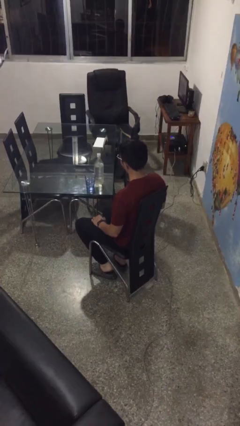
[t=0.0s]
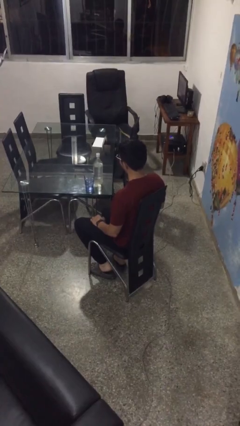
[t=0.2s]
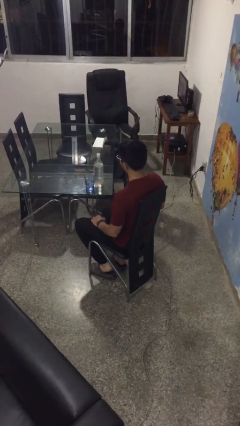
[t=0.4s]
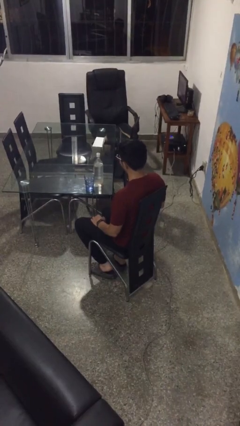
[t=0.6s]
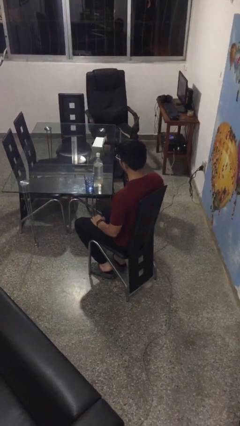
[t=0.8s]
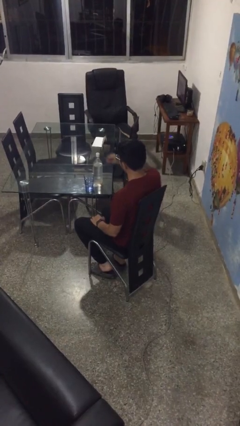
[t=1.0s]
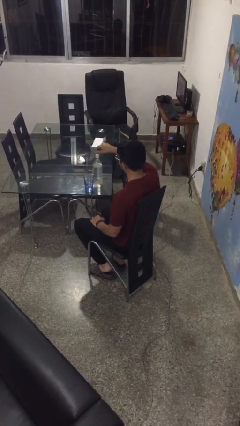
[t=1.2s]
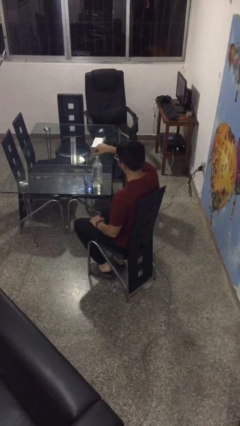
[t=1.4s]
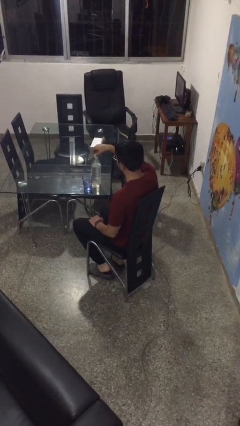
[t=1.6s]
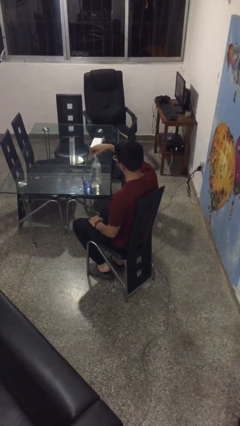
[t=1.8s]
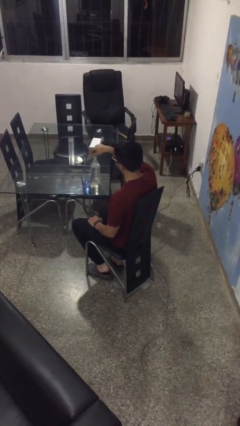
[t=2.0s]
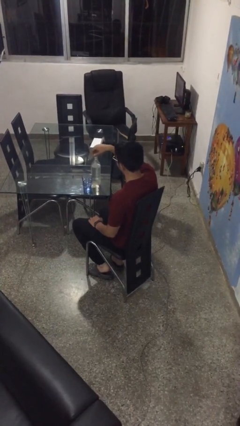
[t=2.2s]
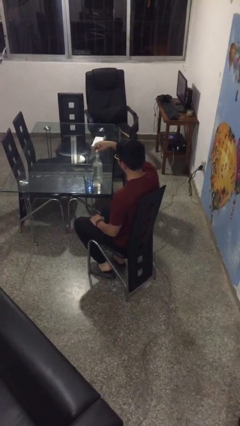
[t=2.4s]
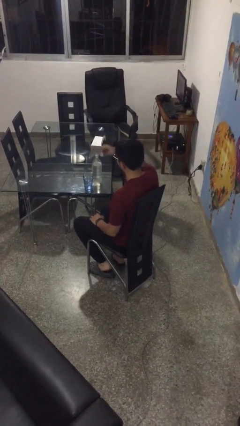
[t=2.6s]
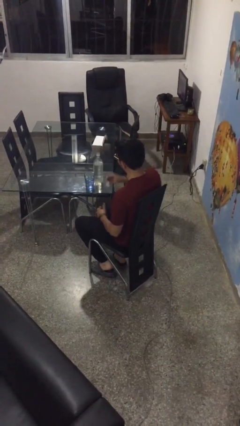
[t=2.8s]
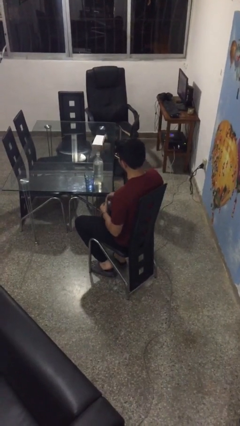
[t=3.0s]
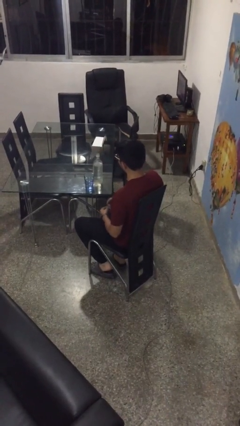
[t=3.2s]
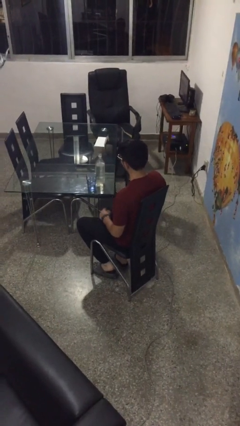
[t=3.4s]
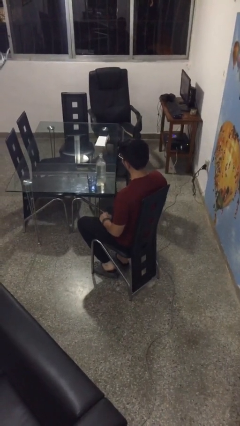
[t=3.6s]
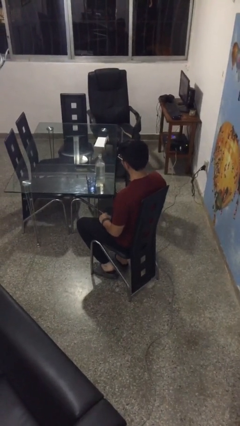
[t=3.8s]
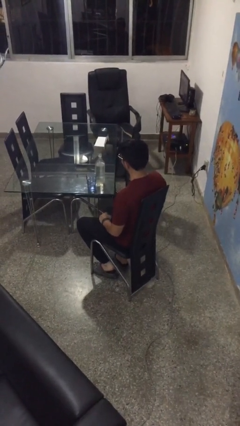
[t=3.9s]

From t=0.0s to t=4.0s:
person unscrews lid from bottle

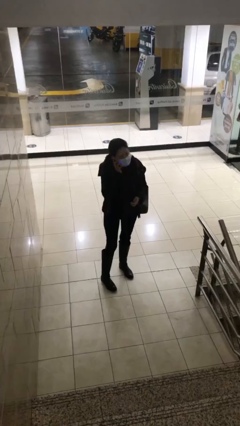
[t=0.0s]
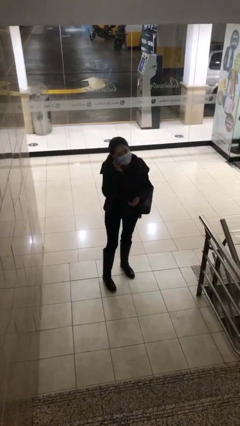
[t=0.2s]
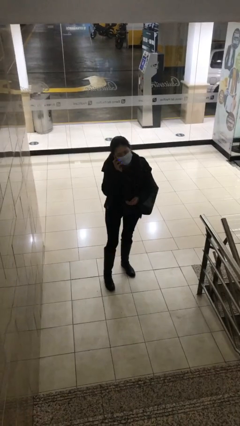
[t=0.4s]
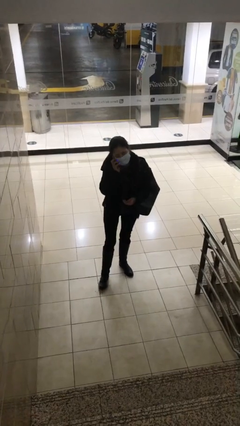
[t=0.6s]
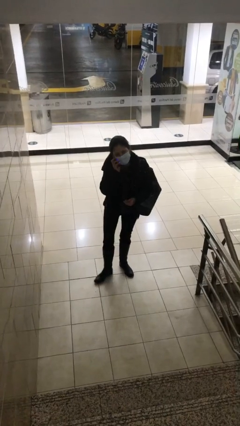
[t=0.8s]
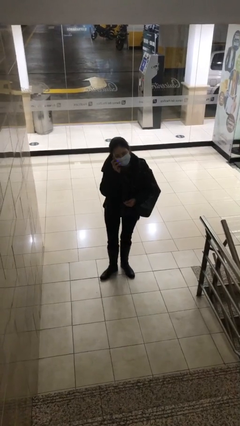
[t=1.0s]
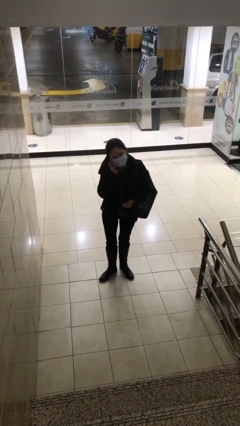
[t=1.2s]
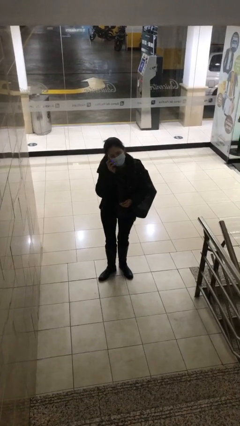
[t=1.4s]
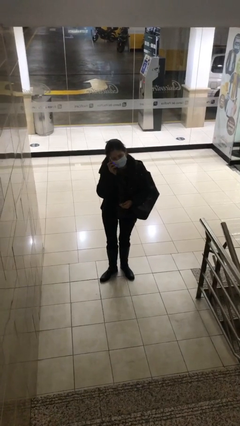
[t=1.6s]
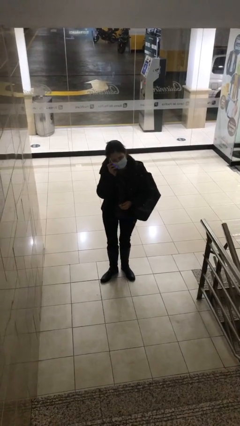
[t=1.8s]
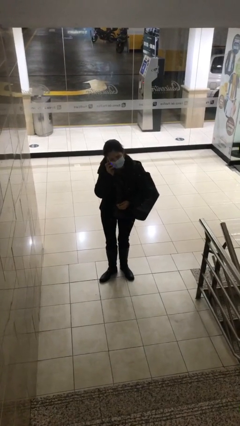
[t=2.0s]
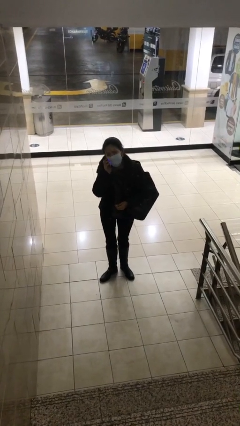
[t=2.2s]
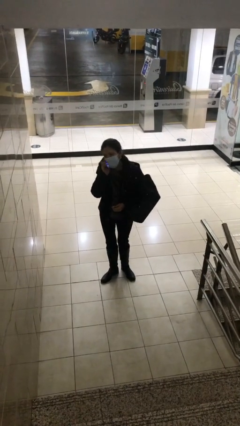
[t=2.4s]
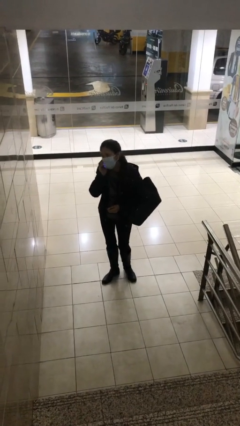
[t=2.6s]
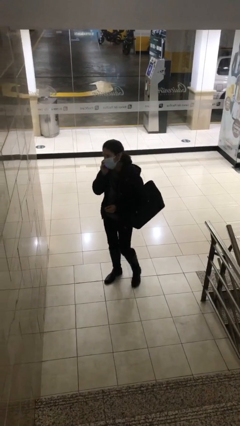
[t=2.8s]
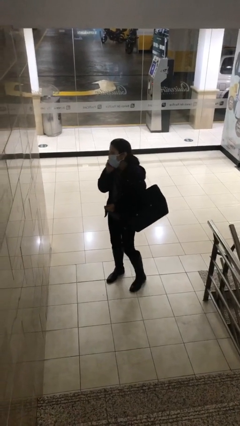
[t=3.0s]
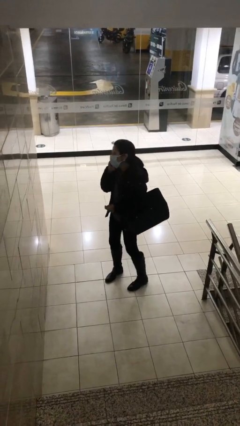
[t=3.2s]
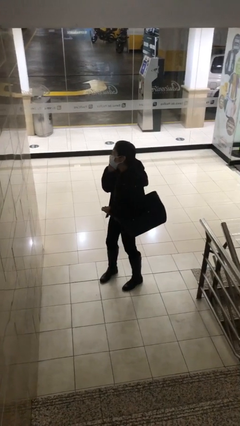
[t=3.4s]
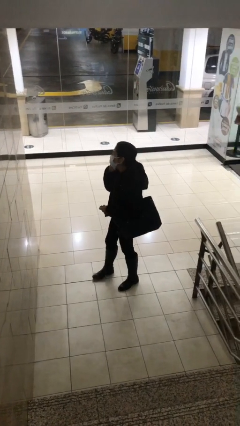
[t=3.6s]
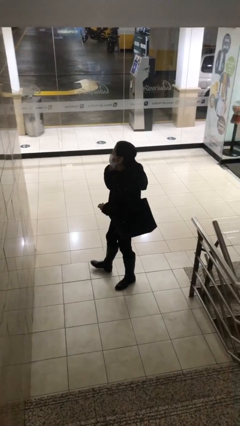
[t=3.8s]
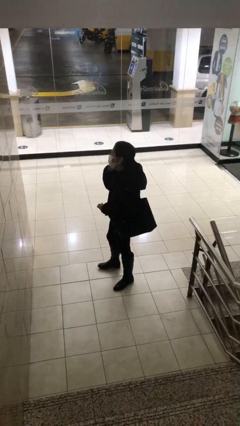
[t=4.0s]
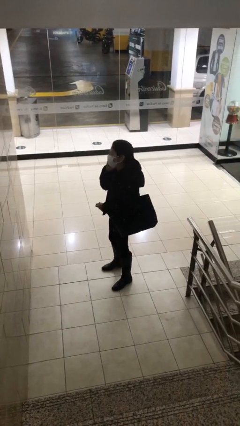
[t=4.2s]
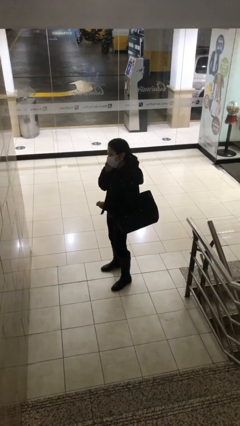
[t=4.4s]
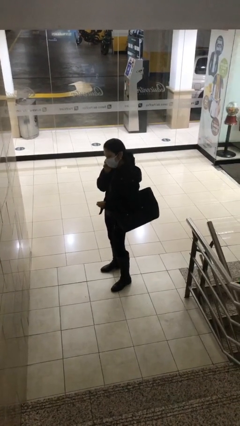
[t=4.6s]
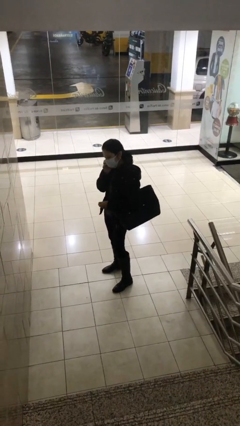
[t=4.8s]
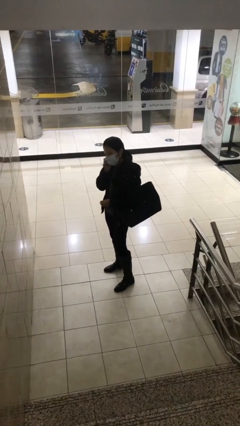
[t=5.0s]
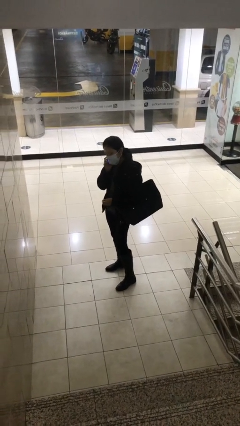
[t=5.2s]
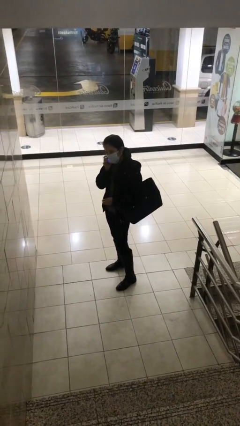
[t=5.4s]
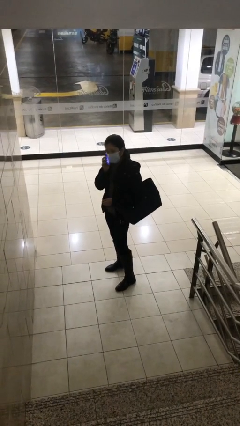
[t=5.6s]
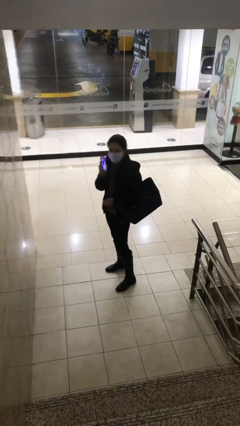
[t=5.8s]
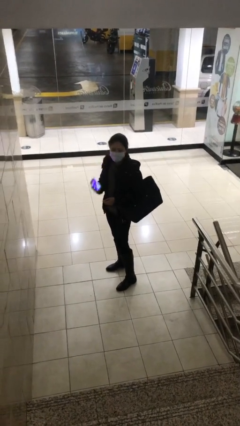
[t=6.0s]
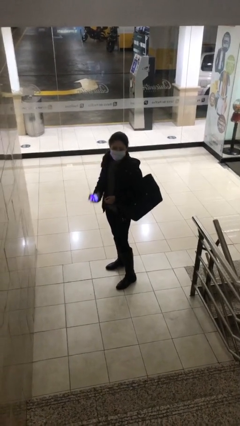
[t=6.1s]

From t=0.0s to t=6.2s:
person talks on phone

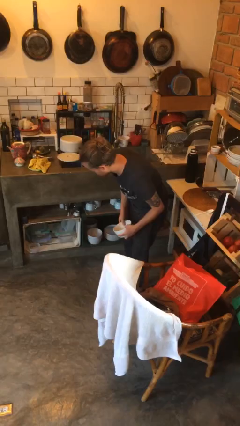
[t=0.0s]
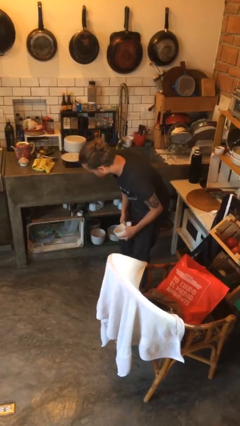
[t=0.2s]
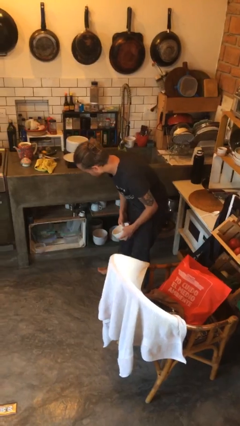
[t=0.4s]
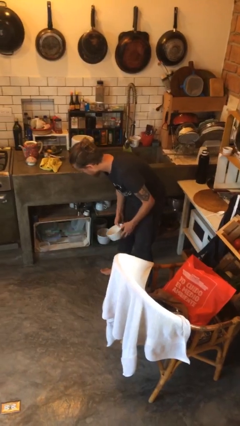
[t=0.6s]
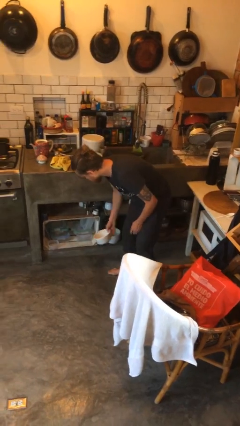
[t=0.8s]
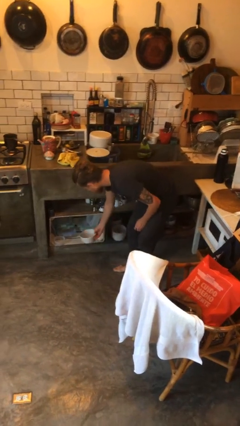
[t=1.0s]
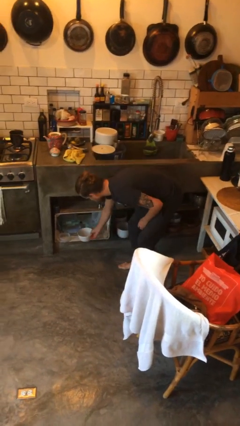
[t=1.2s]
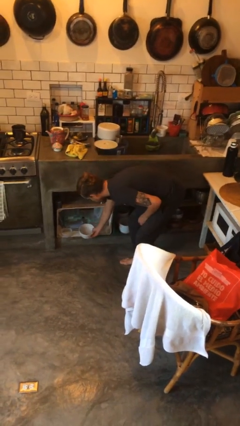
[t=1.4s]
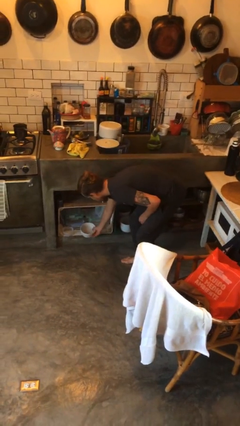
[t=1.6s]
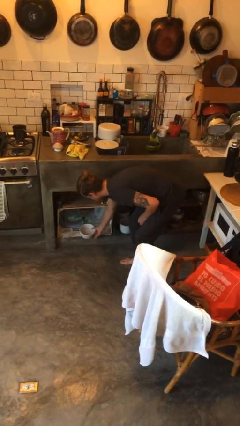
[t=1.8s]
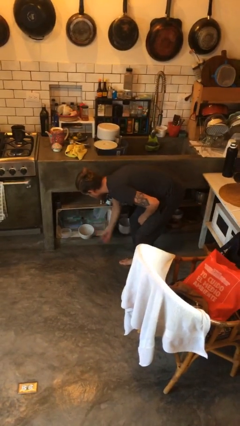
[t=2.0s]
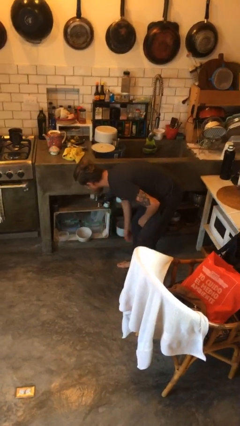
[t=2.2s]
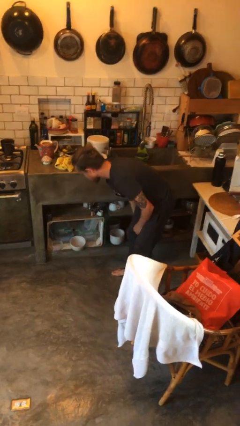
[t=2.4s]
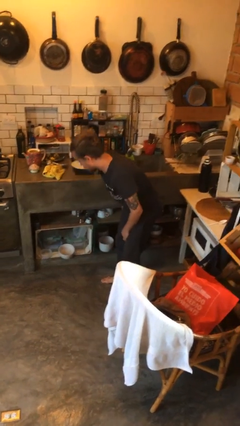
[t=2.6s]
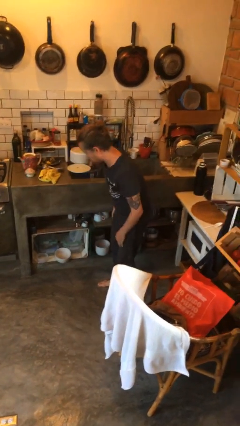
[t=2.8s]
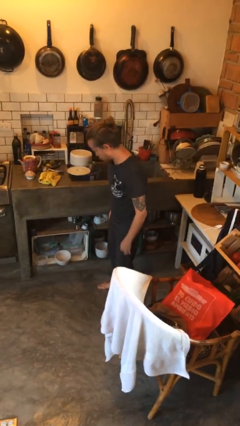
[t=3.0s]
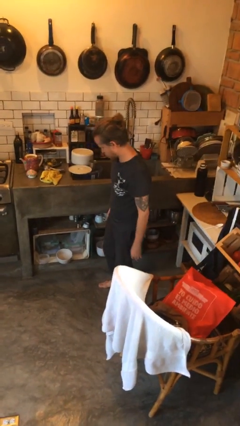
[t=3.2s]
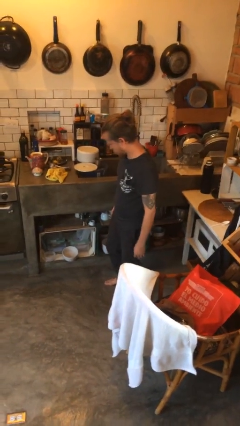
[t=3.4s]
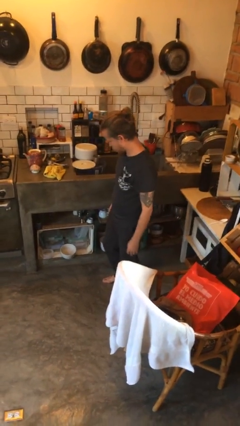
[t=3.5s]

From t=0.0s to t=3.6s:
person puts down object into cabinet

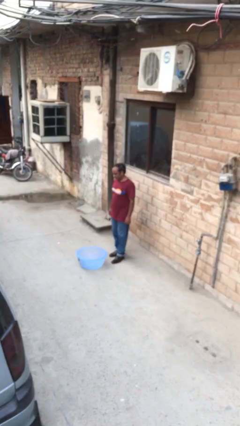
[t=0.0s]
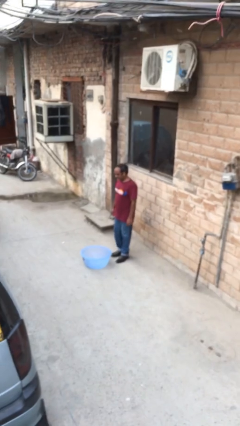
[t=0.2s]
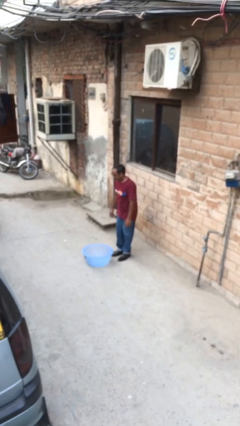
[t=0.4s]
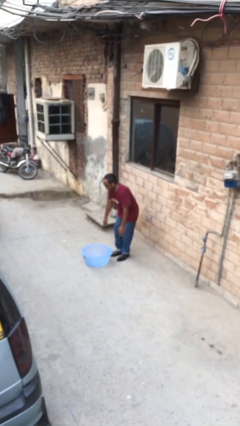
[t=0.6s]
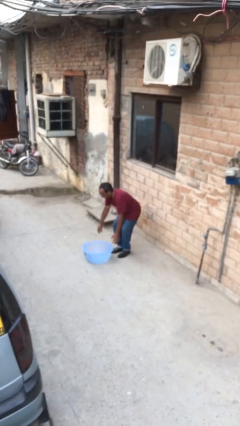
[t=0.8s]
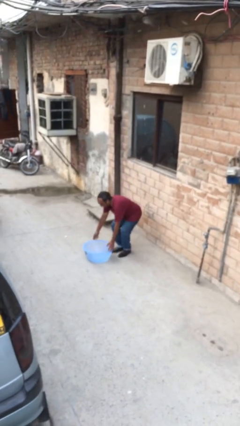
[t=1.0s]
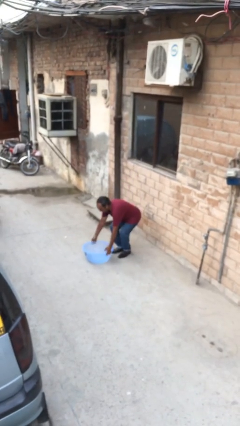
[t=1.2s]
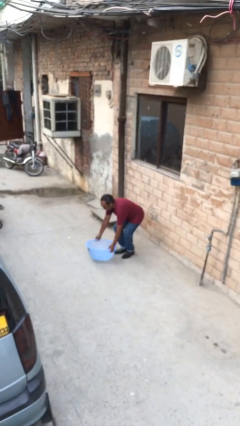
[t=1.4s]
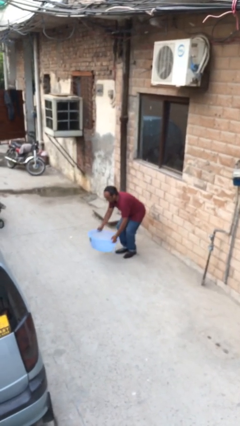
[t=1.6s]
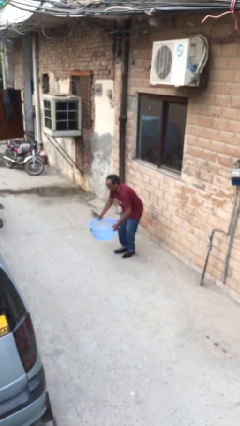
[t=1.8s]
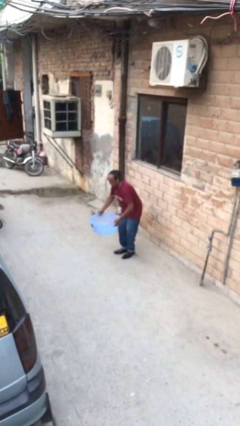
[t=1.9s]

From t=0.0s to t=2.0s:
person picks up object from floor

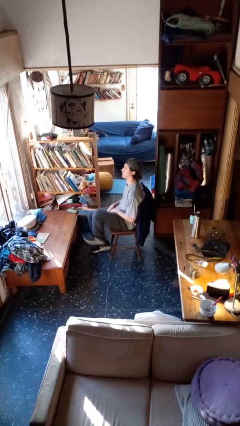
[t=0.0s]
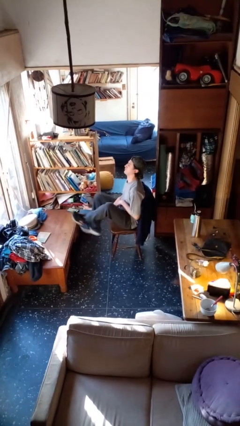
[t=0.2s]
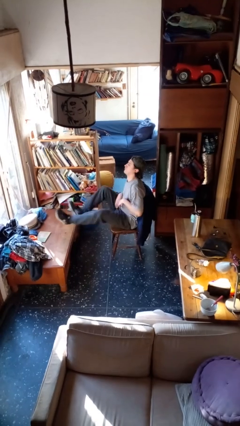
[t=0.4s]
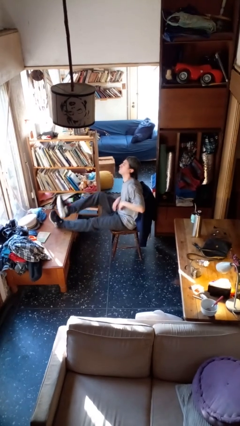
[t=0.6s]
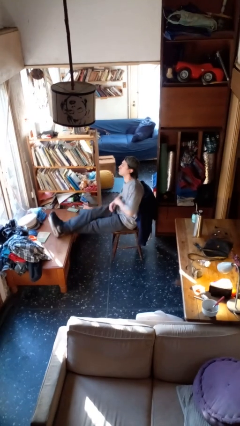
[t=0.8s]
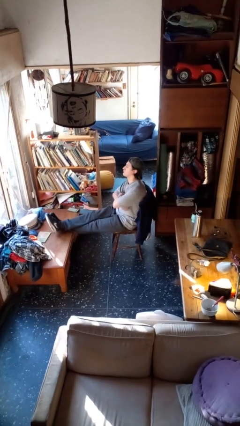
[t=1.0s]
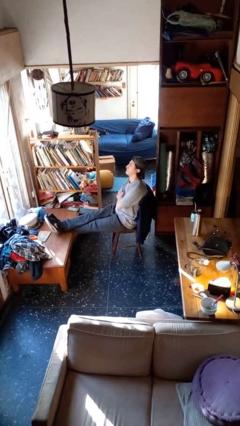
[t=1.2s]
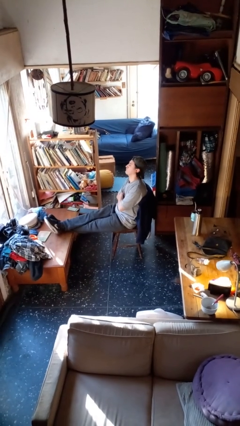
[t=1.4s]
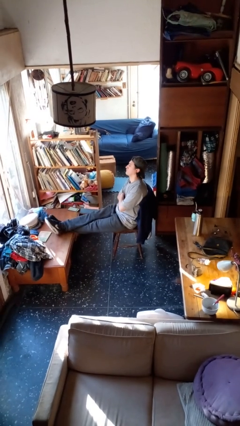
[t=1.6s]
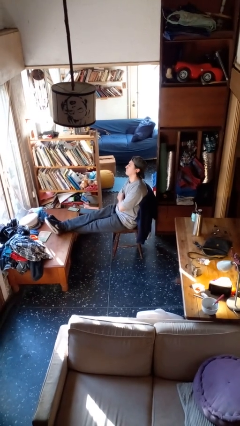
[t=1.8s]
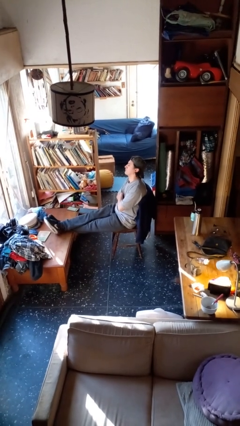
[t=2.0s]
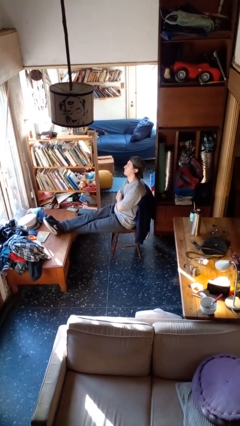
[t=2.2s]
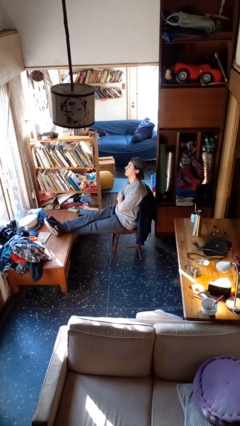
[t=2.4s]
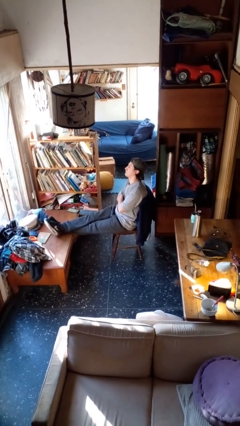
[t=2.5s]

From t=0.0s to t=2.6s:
person puts feet up
